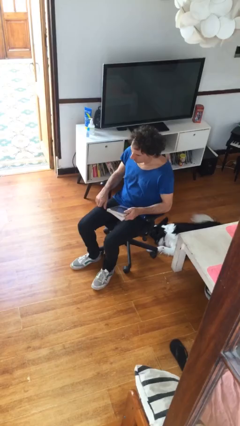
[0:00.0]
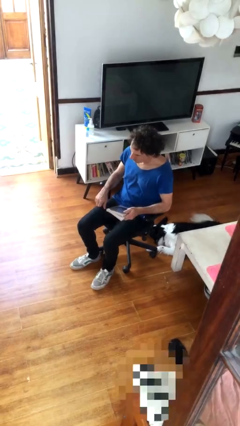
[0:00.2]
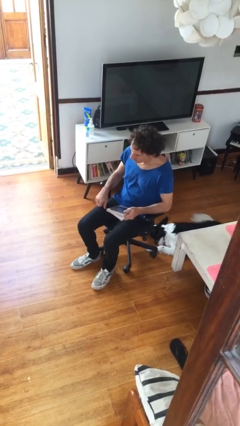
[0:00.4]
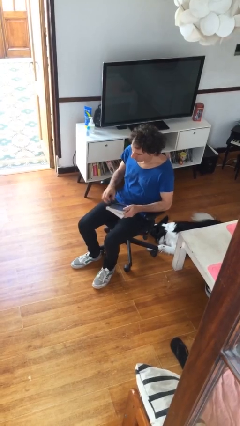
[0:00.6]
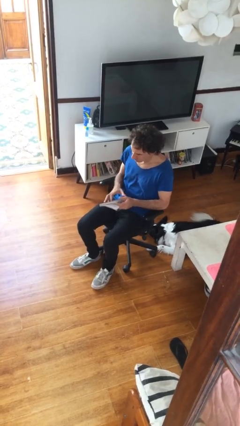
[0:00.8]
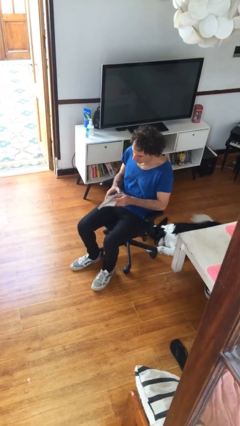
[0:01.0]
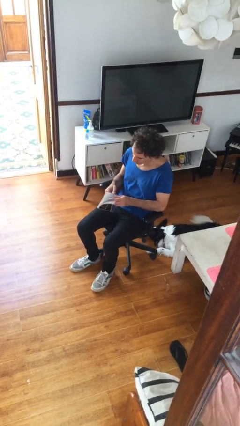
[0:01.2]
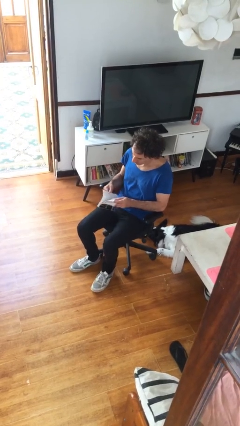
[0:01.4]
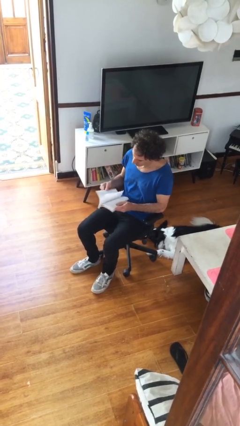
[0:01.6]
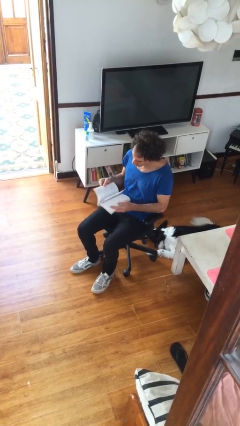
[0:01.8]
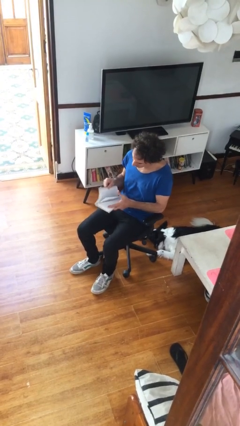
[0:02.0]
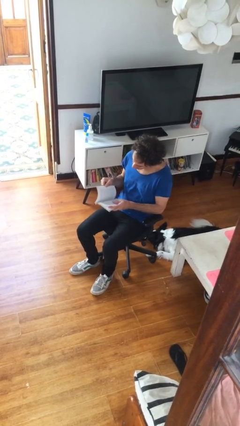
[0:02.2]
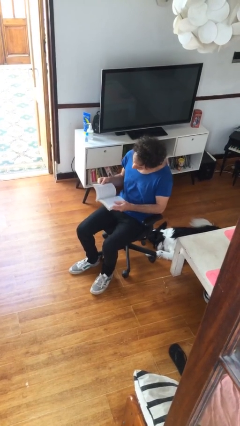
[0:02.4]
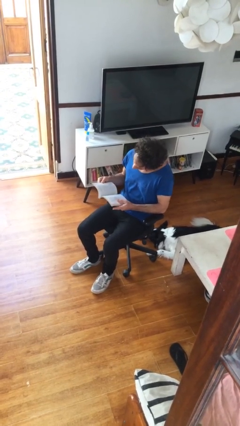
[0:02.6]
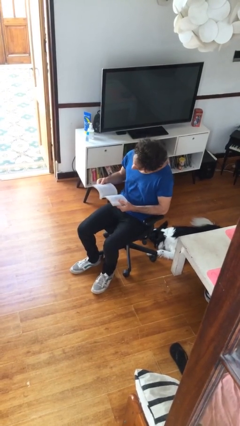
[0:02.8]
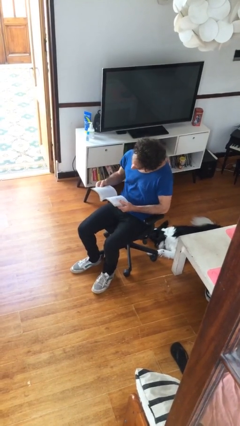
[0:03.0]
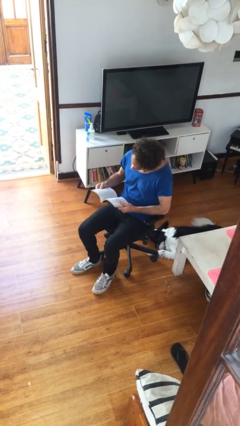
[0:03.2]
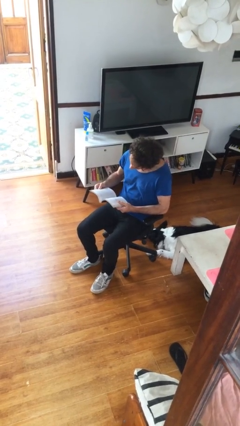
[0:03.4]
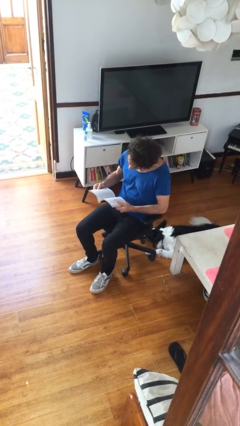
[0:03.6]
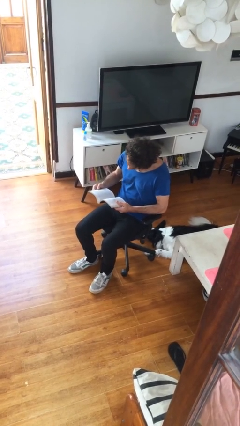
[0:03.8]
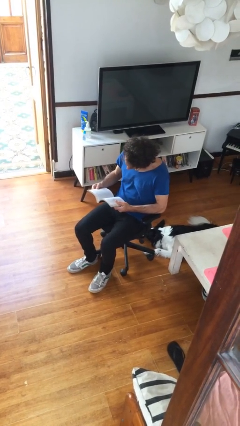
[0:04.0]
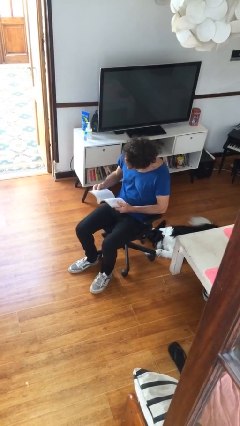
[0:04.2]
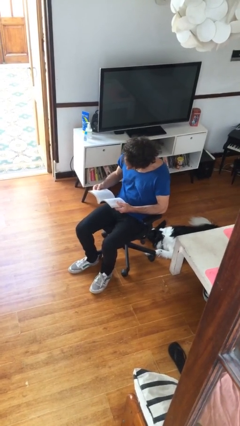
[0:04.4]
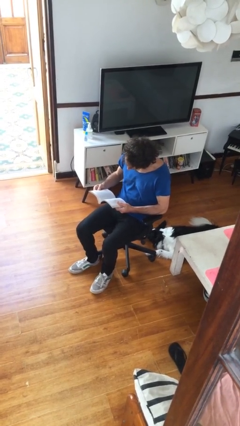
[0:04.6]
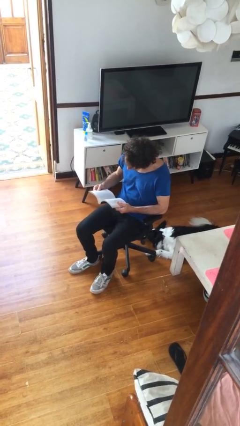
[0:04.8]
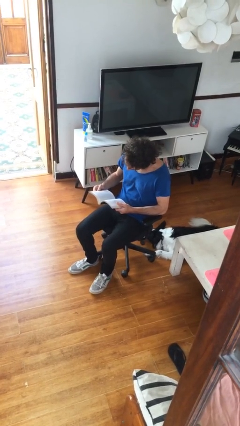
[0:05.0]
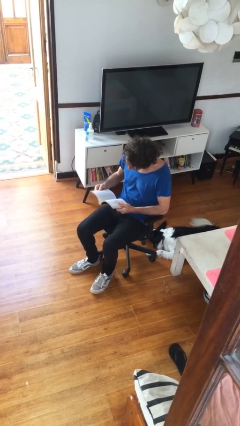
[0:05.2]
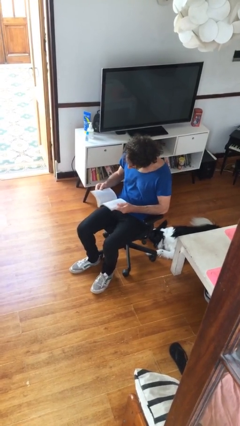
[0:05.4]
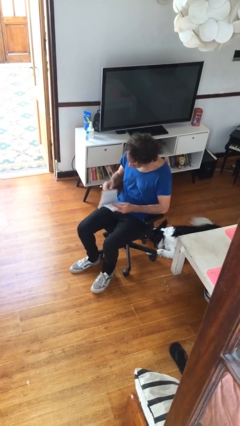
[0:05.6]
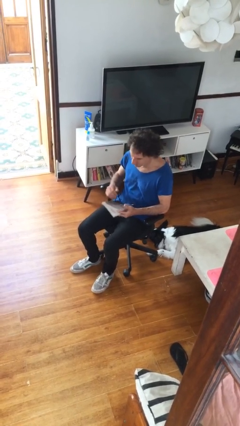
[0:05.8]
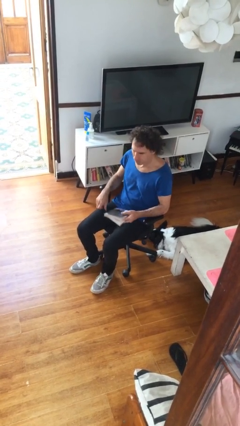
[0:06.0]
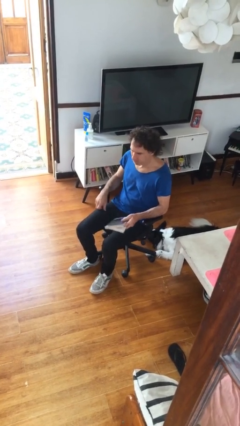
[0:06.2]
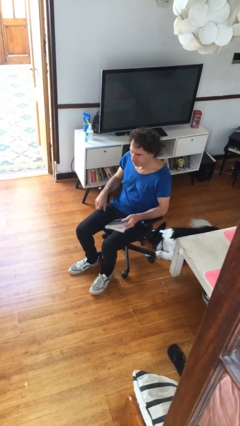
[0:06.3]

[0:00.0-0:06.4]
person reads document

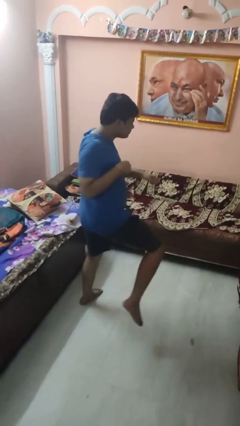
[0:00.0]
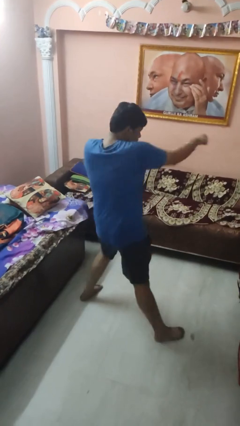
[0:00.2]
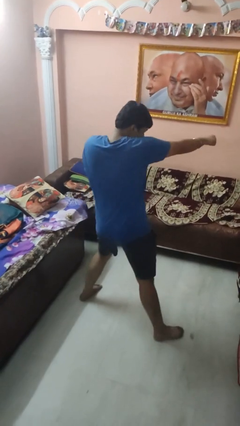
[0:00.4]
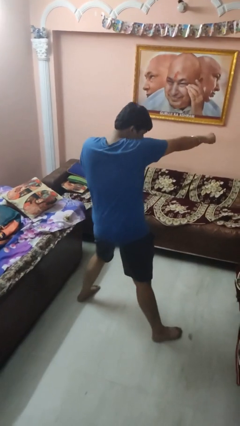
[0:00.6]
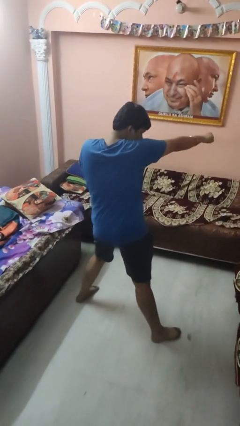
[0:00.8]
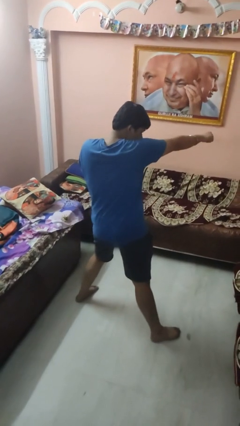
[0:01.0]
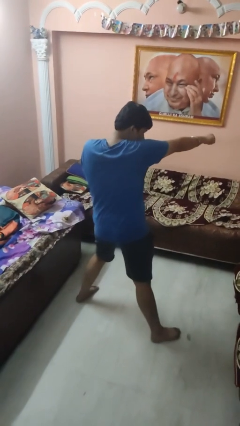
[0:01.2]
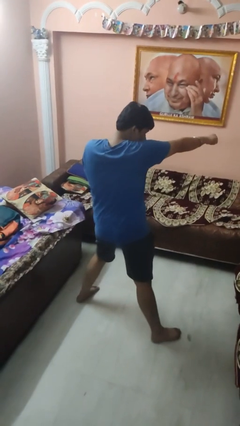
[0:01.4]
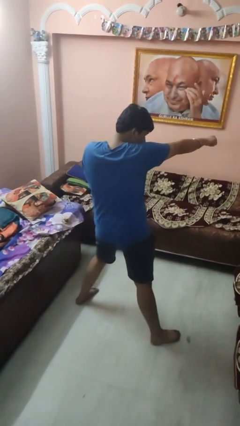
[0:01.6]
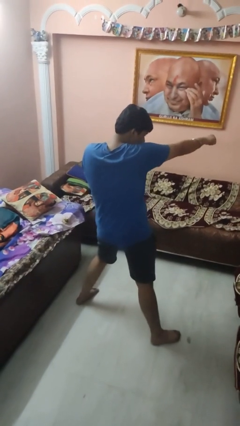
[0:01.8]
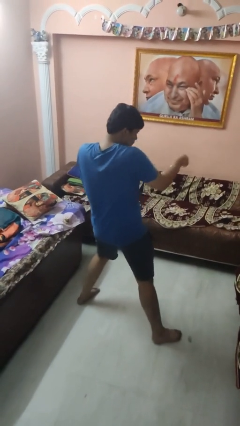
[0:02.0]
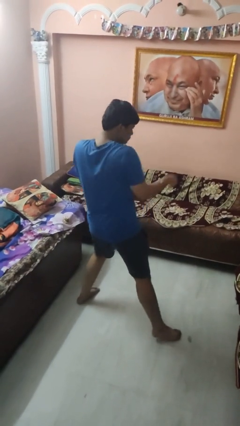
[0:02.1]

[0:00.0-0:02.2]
person punches

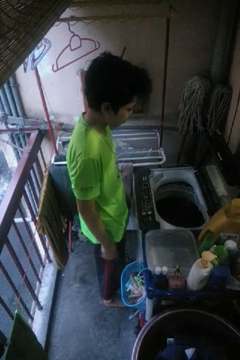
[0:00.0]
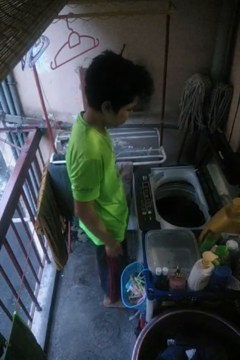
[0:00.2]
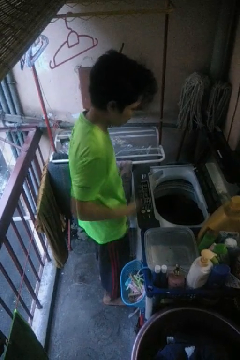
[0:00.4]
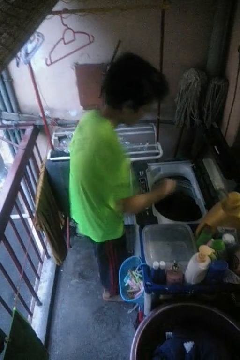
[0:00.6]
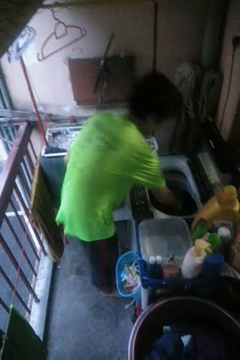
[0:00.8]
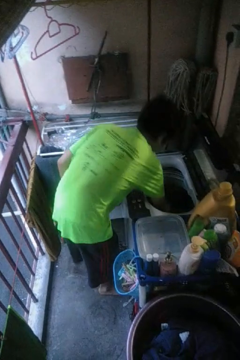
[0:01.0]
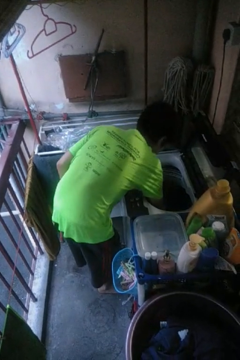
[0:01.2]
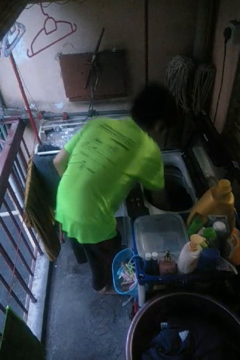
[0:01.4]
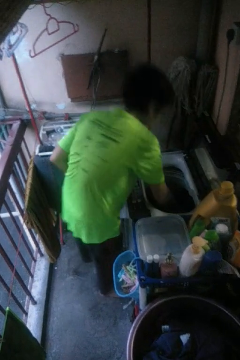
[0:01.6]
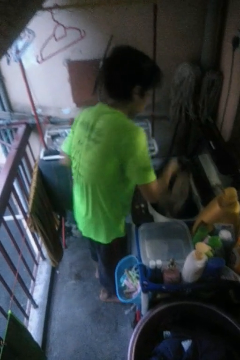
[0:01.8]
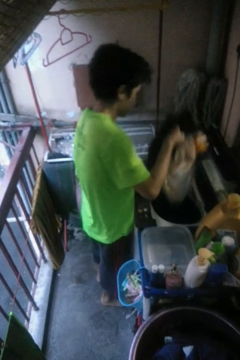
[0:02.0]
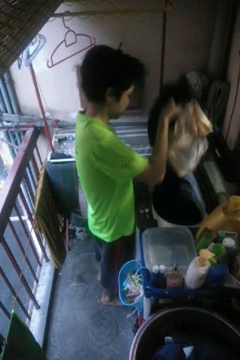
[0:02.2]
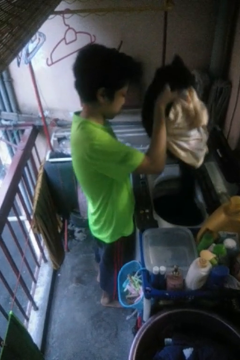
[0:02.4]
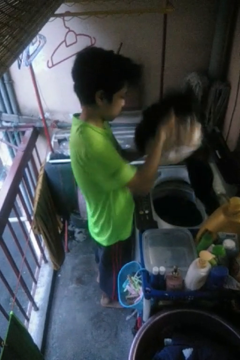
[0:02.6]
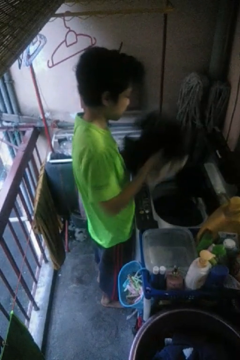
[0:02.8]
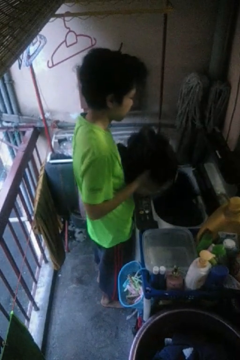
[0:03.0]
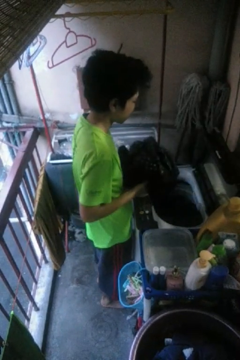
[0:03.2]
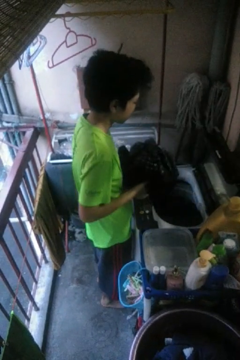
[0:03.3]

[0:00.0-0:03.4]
person unloads clotheswasher

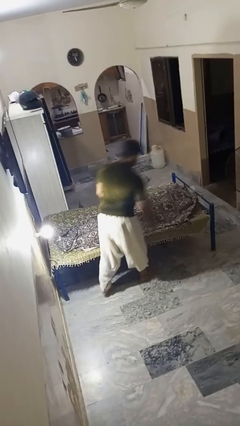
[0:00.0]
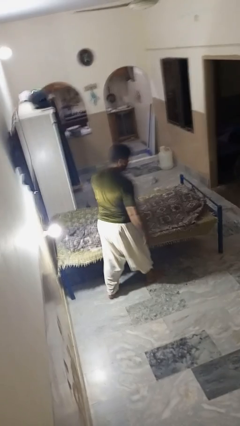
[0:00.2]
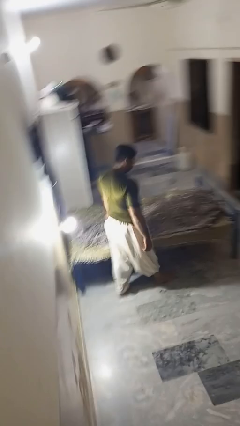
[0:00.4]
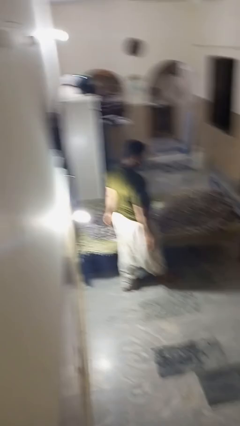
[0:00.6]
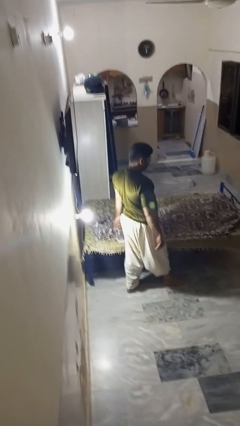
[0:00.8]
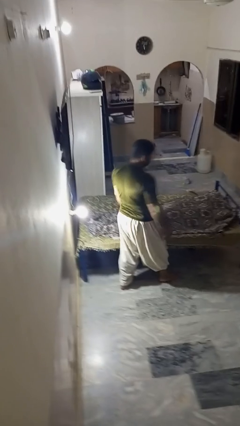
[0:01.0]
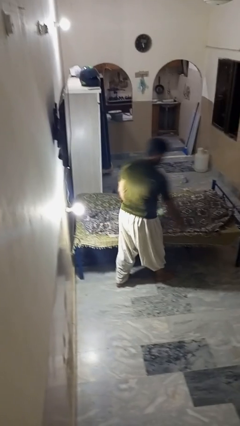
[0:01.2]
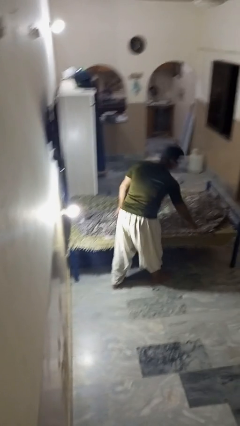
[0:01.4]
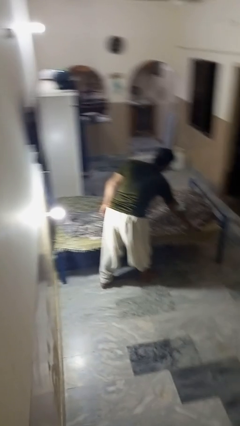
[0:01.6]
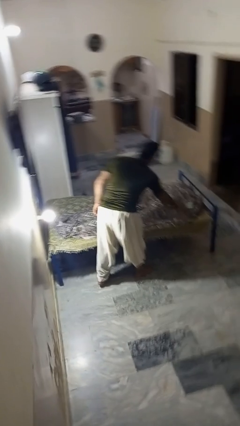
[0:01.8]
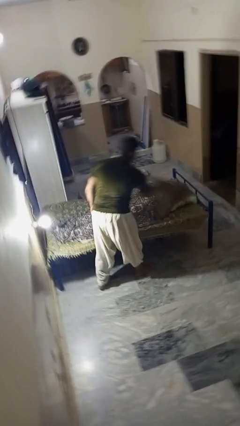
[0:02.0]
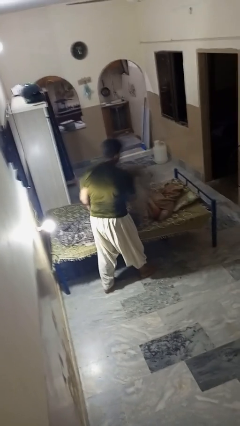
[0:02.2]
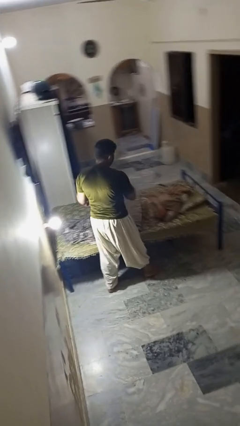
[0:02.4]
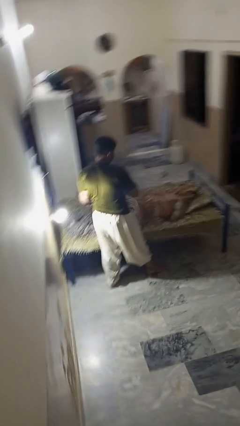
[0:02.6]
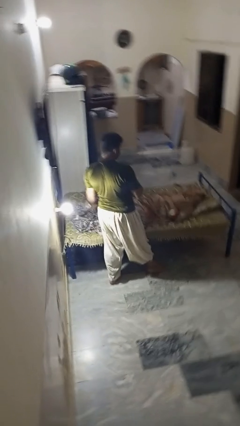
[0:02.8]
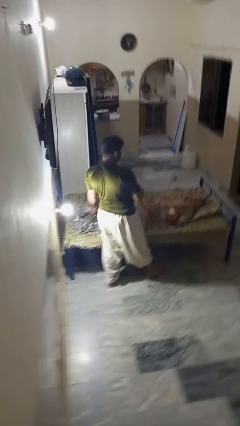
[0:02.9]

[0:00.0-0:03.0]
person uncovers friend with blanket

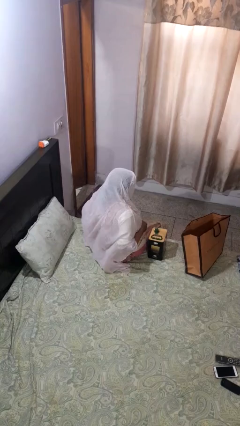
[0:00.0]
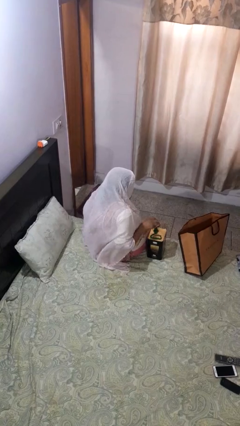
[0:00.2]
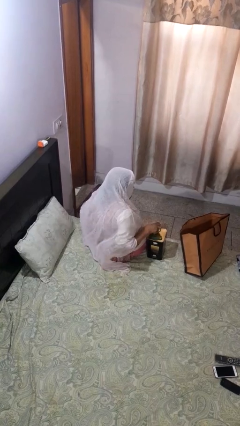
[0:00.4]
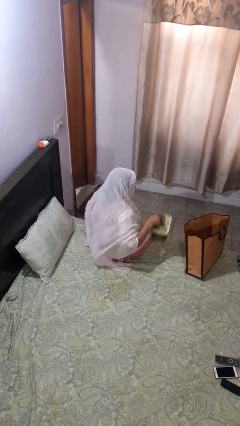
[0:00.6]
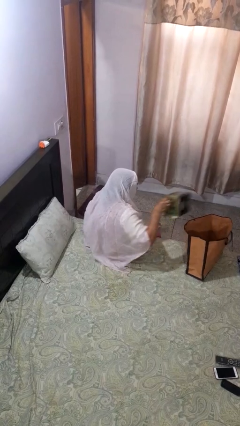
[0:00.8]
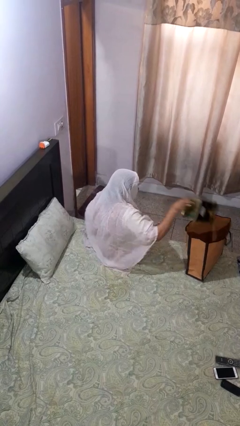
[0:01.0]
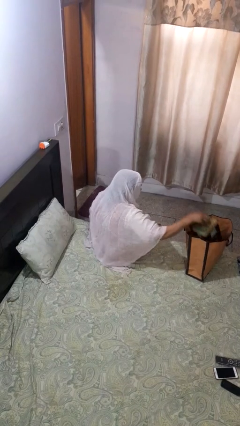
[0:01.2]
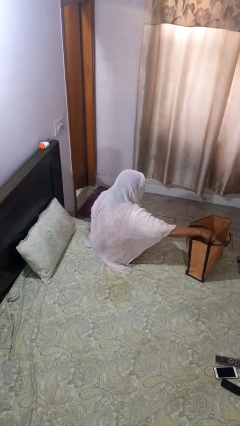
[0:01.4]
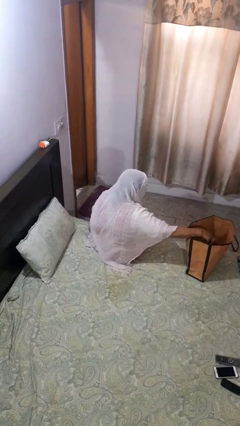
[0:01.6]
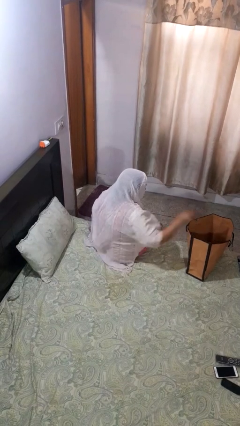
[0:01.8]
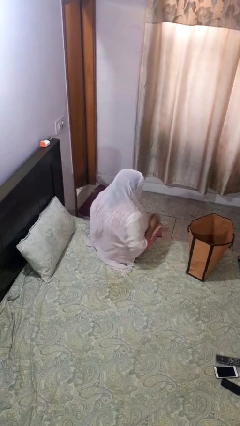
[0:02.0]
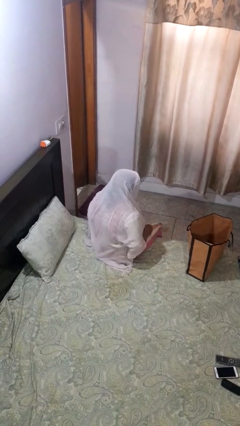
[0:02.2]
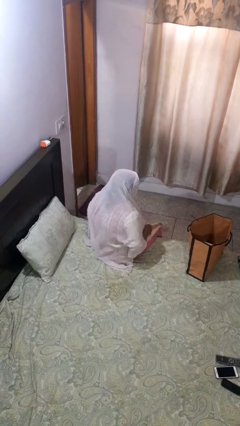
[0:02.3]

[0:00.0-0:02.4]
person puts object into bag
